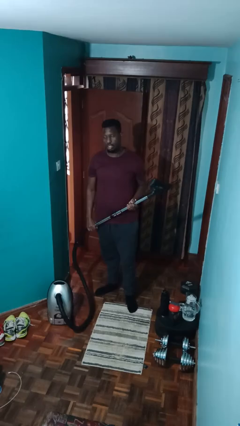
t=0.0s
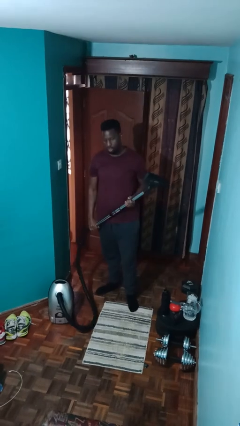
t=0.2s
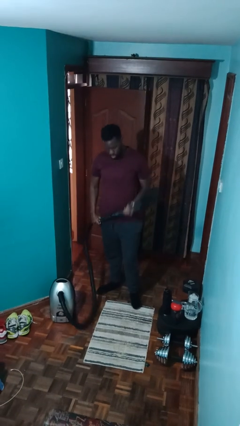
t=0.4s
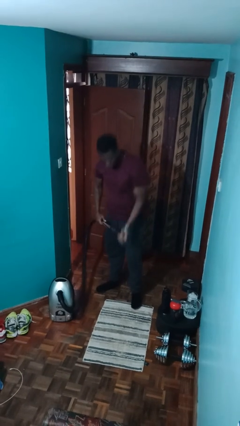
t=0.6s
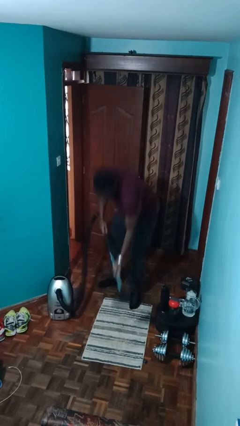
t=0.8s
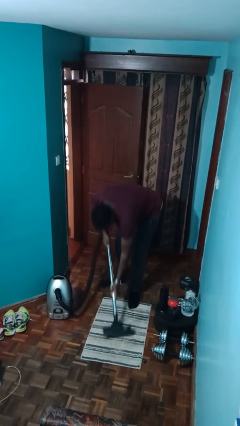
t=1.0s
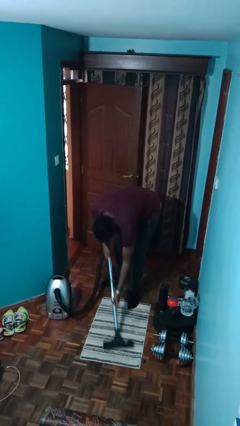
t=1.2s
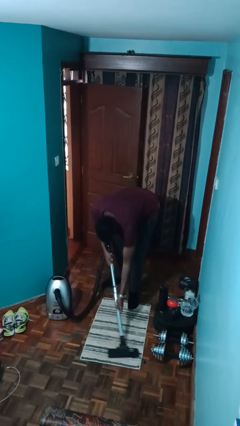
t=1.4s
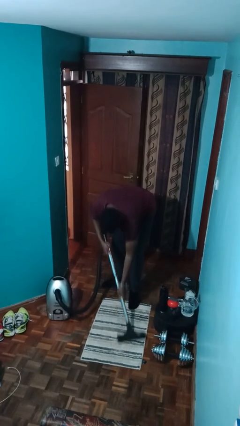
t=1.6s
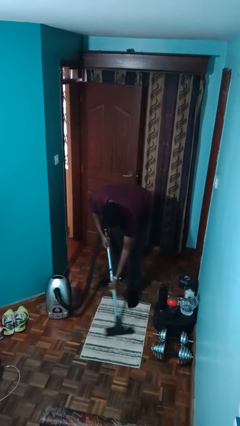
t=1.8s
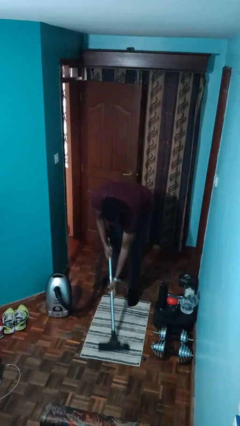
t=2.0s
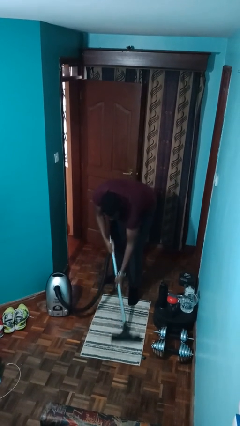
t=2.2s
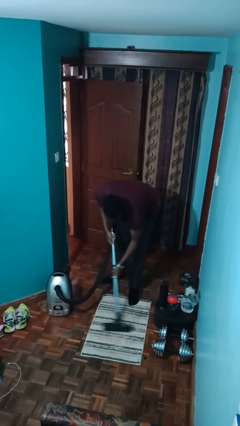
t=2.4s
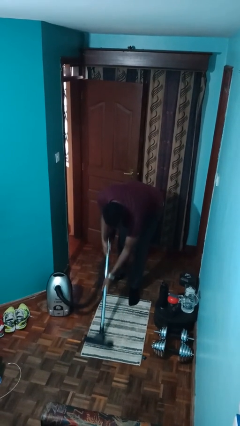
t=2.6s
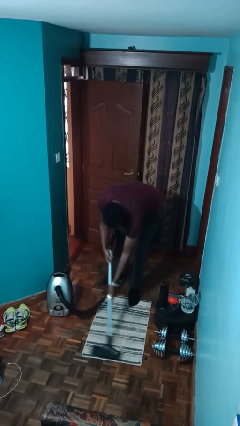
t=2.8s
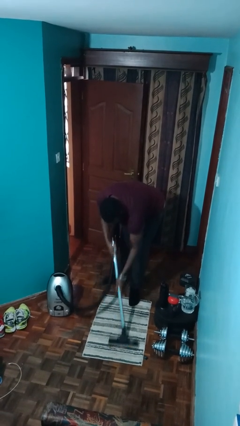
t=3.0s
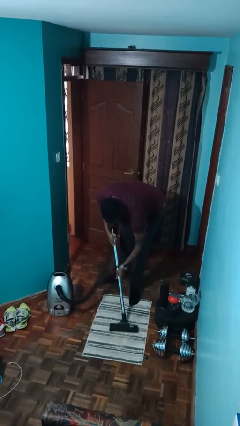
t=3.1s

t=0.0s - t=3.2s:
person vacuums carpet

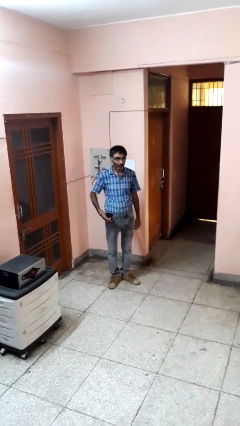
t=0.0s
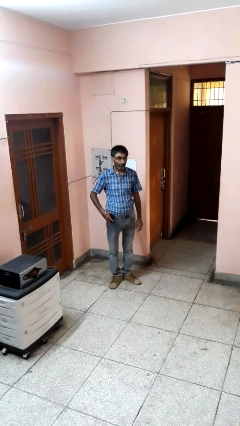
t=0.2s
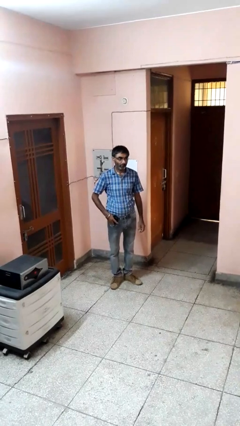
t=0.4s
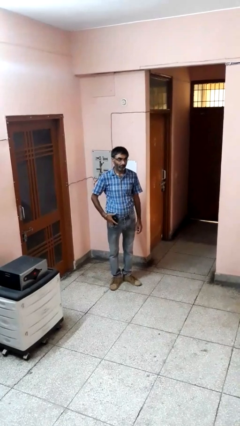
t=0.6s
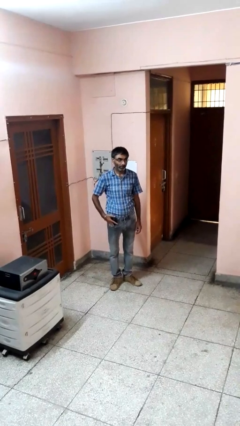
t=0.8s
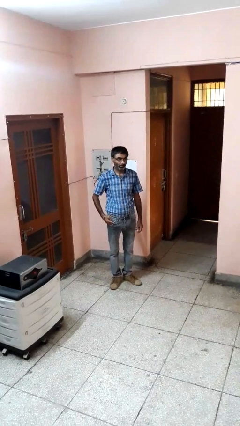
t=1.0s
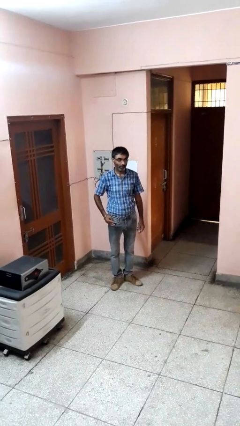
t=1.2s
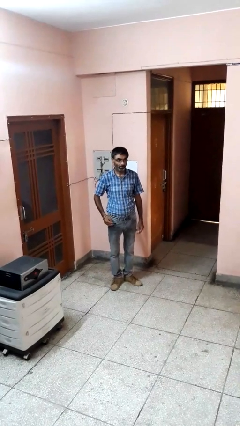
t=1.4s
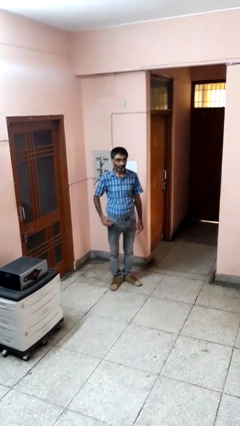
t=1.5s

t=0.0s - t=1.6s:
person puts phone into pocket

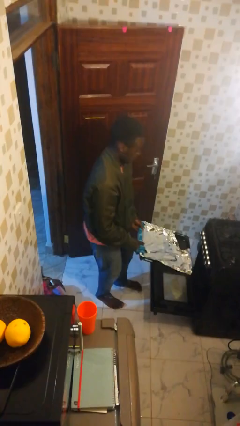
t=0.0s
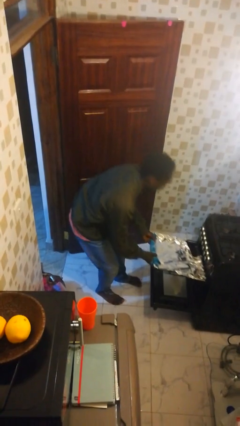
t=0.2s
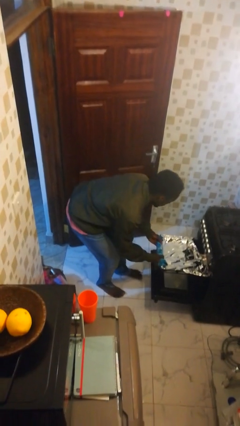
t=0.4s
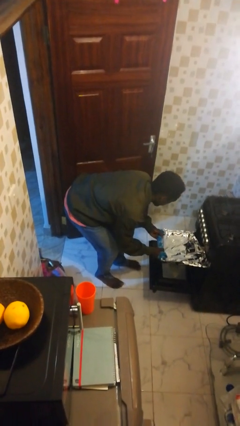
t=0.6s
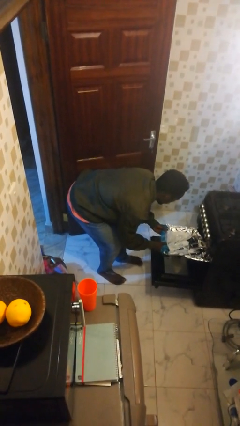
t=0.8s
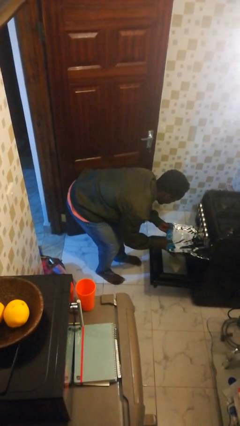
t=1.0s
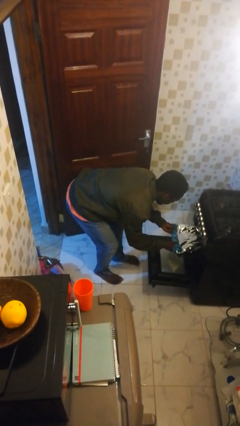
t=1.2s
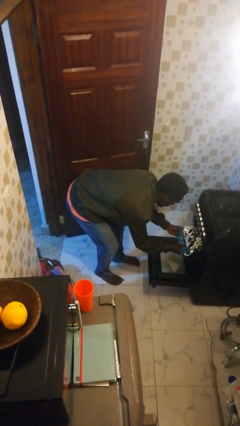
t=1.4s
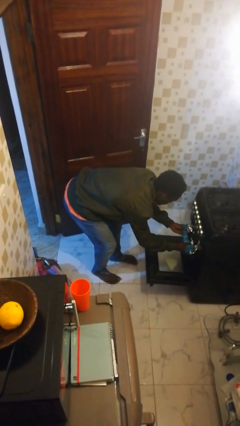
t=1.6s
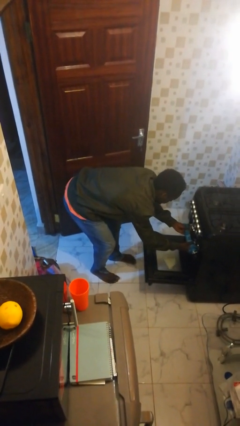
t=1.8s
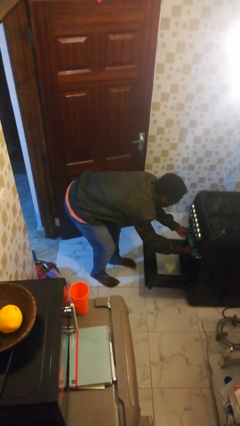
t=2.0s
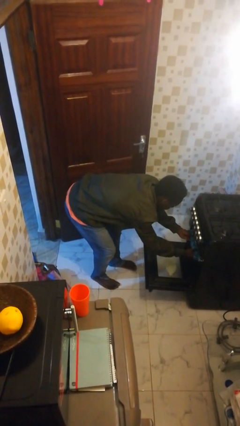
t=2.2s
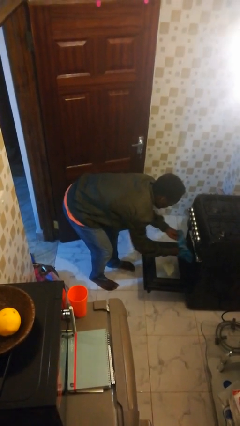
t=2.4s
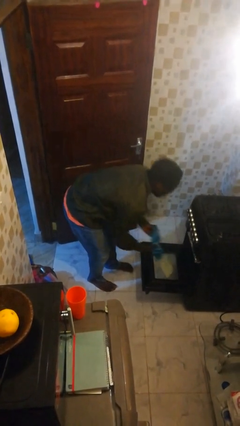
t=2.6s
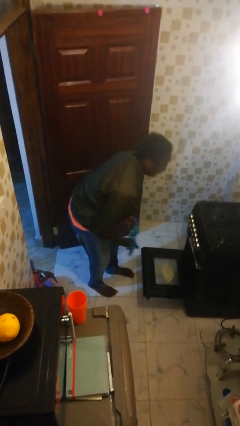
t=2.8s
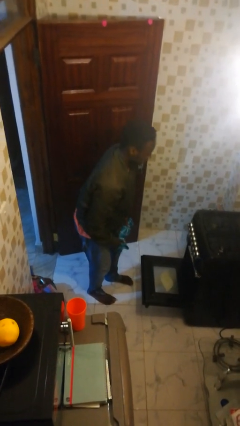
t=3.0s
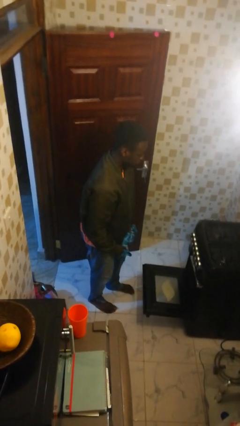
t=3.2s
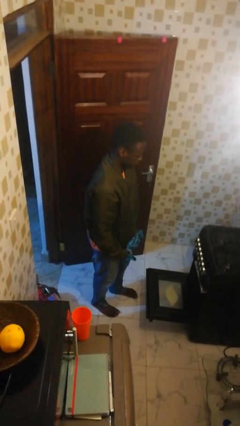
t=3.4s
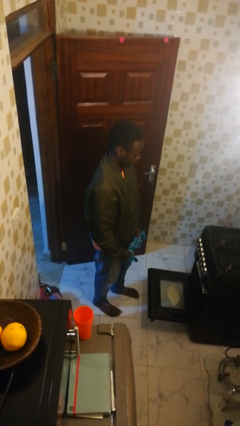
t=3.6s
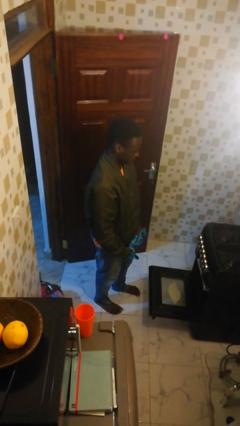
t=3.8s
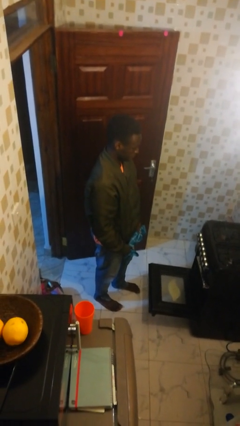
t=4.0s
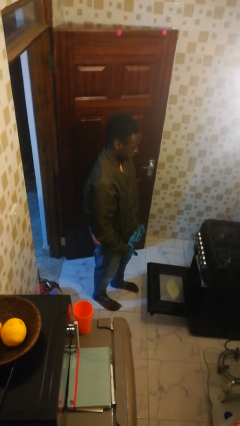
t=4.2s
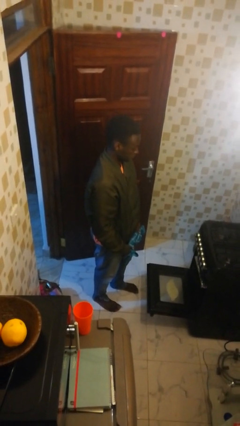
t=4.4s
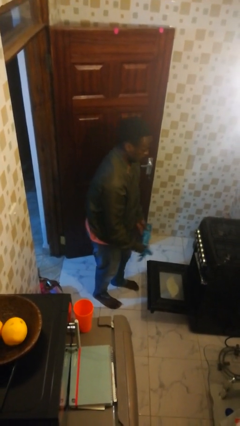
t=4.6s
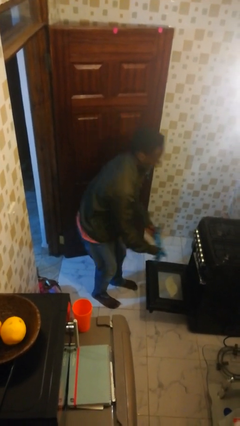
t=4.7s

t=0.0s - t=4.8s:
person puts object into oven

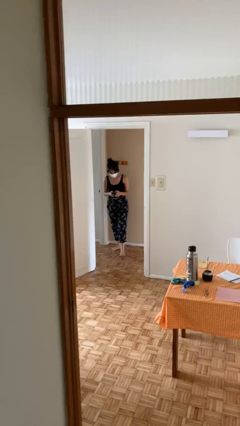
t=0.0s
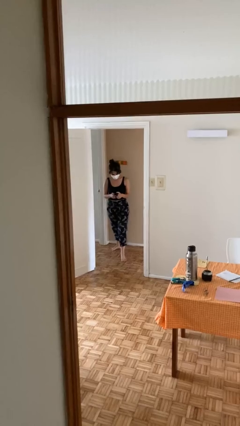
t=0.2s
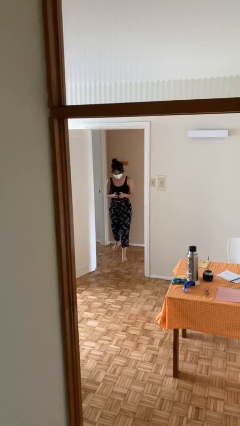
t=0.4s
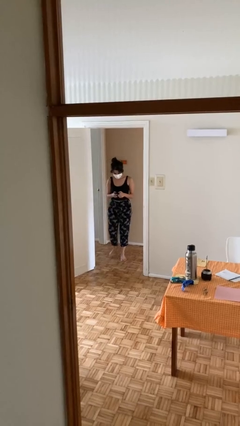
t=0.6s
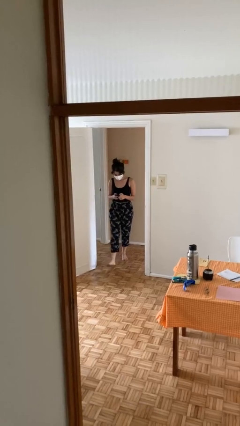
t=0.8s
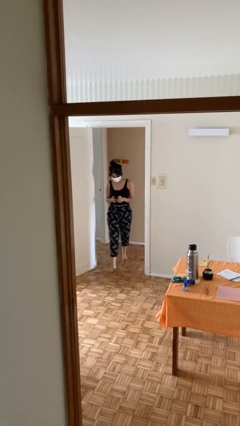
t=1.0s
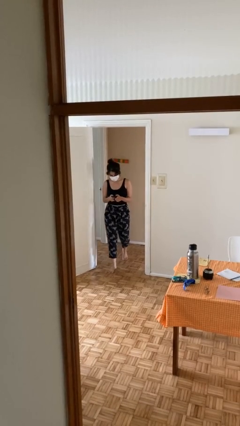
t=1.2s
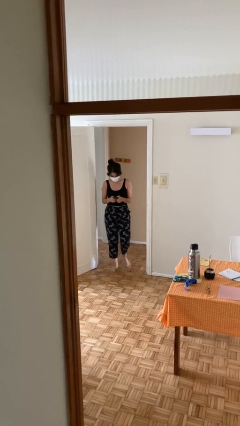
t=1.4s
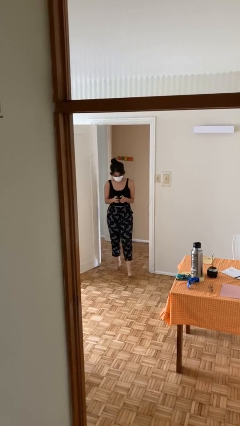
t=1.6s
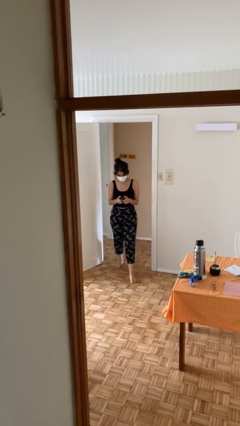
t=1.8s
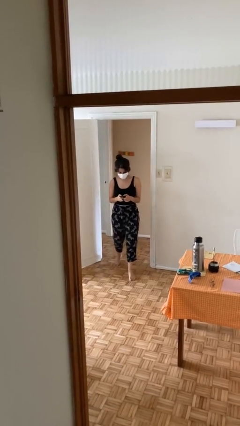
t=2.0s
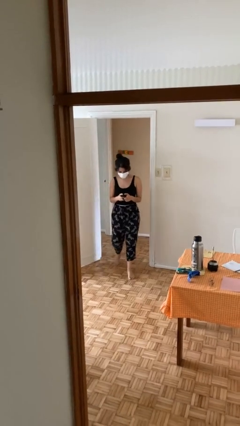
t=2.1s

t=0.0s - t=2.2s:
person enters scene through structure

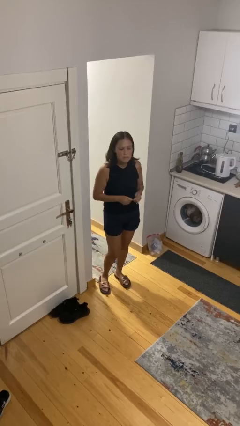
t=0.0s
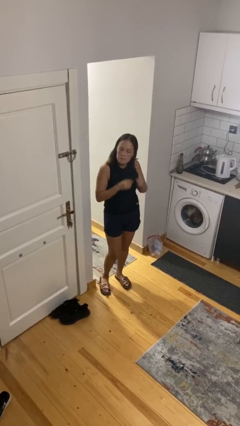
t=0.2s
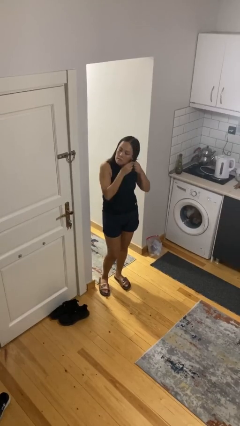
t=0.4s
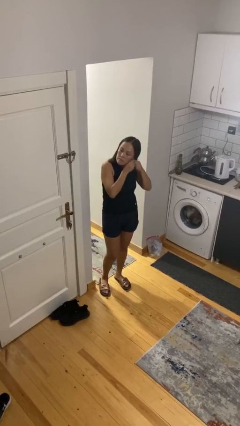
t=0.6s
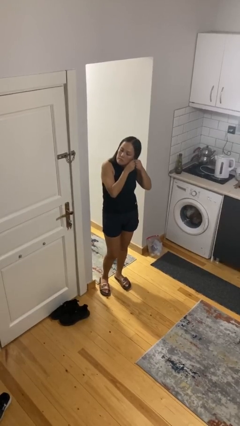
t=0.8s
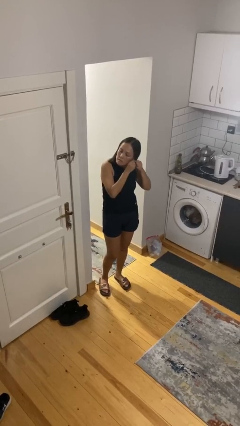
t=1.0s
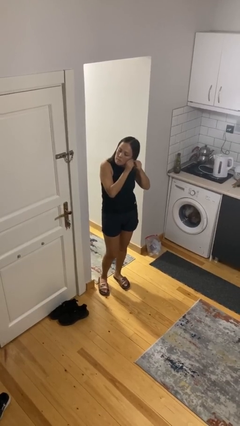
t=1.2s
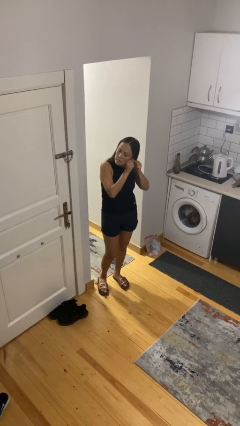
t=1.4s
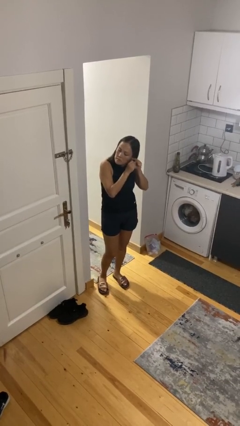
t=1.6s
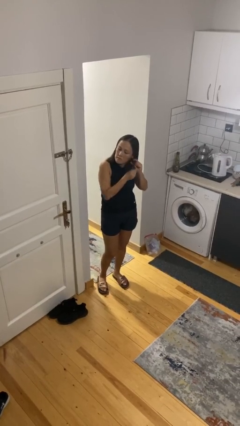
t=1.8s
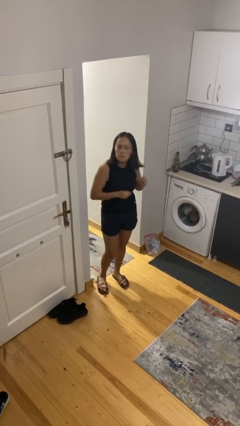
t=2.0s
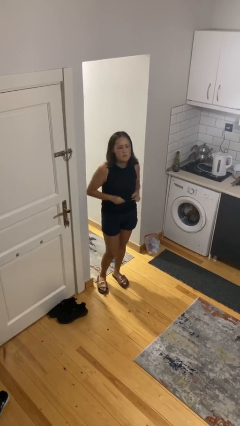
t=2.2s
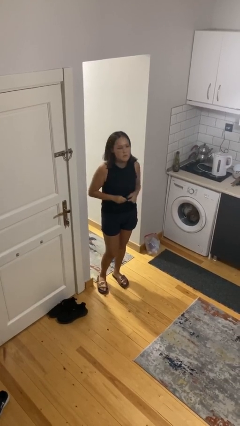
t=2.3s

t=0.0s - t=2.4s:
person takes off earrings

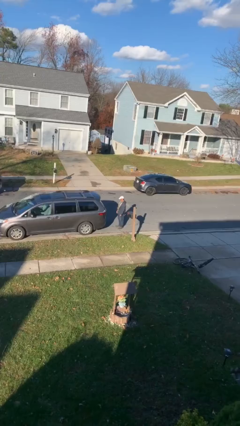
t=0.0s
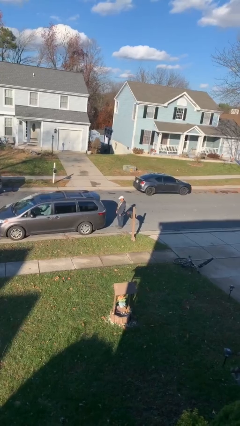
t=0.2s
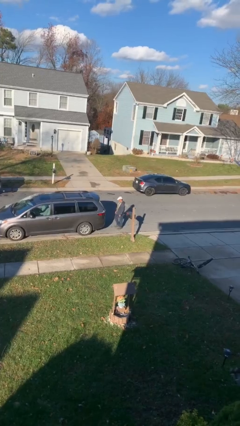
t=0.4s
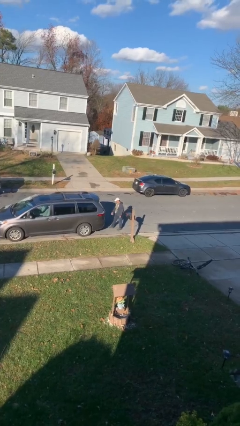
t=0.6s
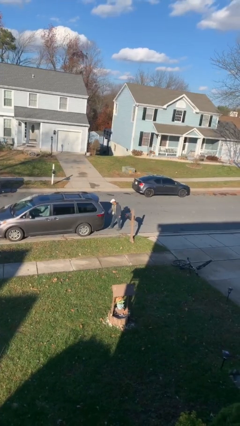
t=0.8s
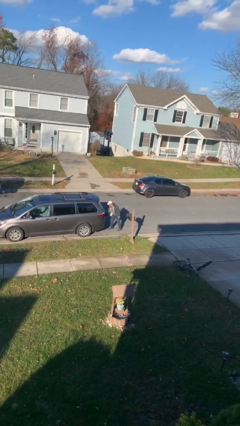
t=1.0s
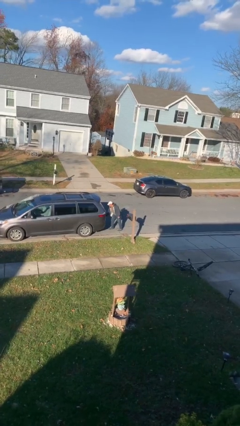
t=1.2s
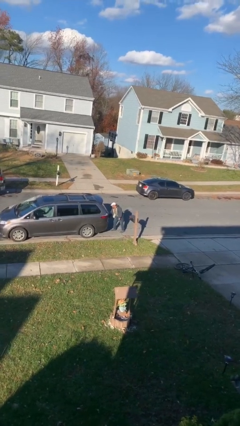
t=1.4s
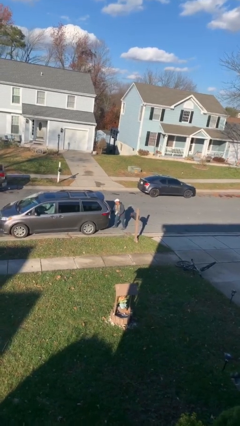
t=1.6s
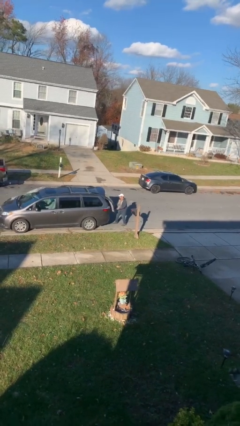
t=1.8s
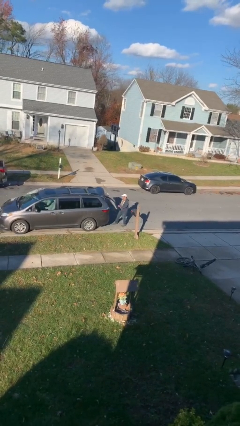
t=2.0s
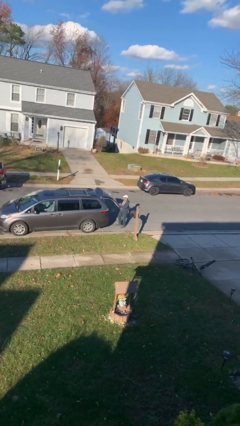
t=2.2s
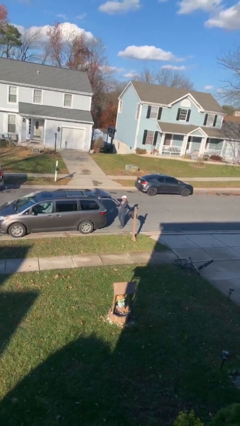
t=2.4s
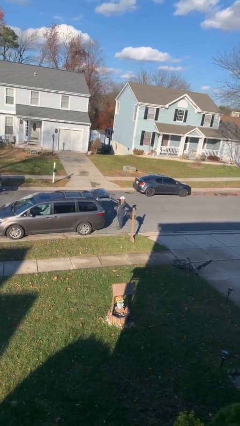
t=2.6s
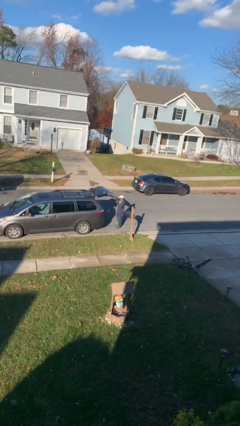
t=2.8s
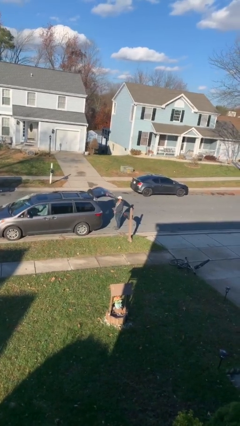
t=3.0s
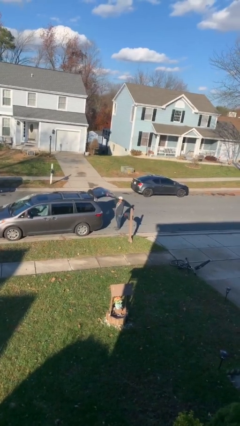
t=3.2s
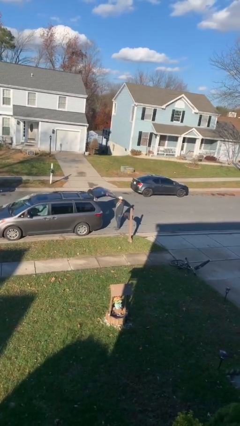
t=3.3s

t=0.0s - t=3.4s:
person opens car trunk
